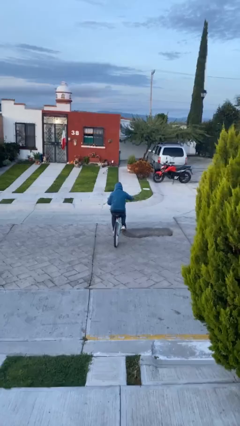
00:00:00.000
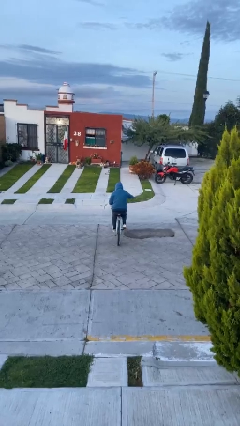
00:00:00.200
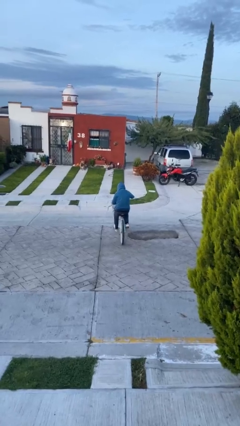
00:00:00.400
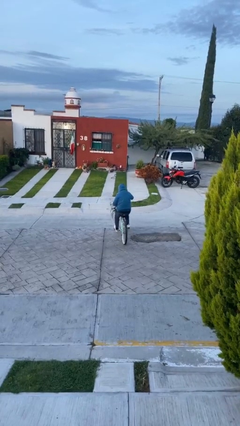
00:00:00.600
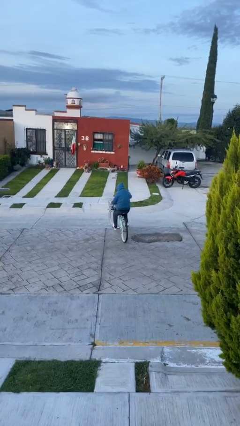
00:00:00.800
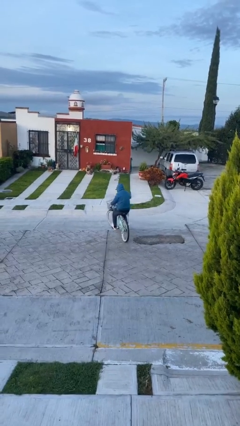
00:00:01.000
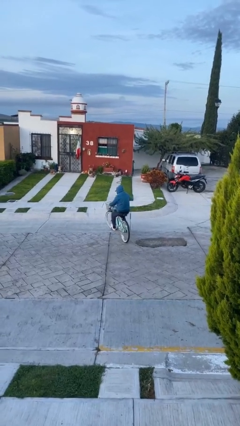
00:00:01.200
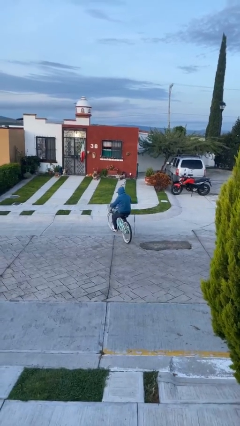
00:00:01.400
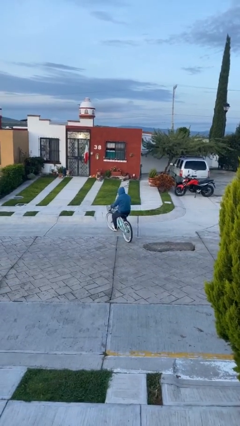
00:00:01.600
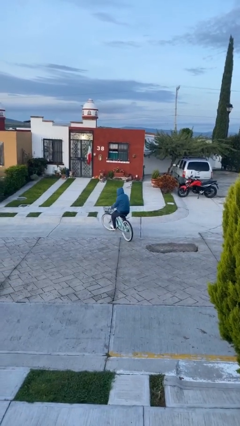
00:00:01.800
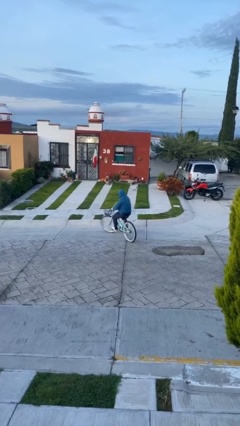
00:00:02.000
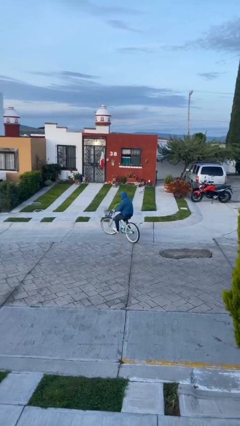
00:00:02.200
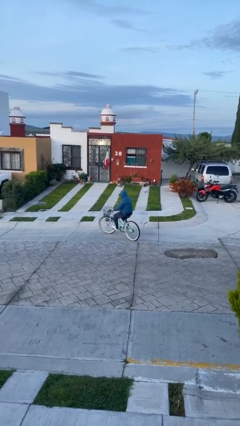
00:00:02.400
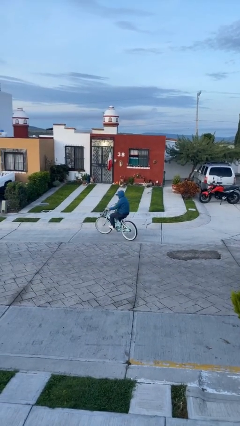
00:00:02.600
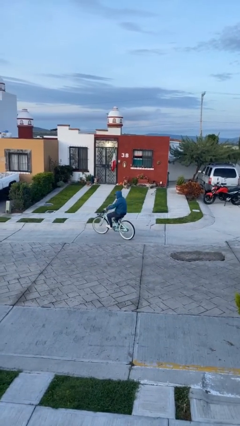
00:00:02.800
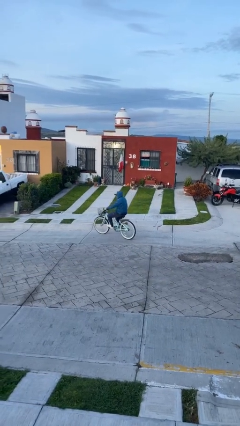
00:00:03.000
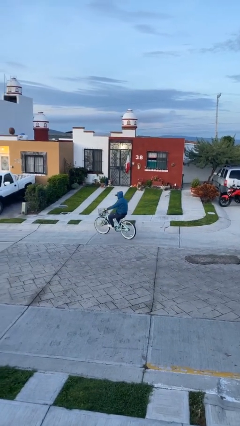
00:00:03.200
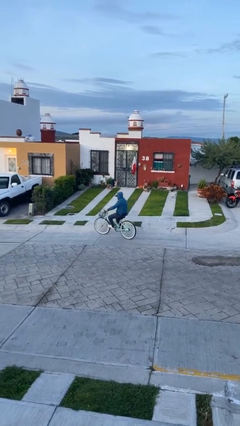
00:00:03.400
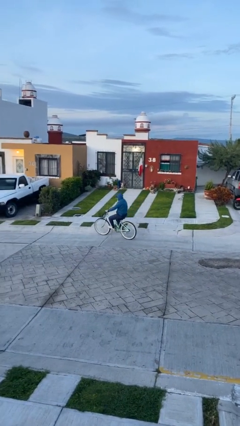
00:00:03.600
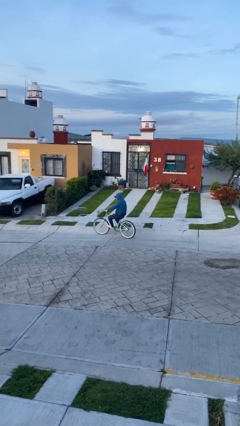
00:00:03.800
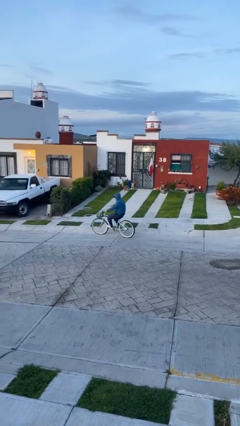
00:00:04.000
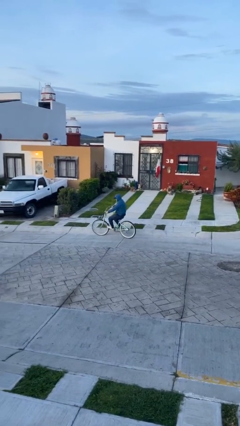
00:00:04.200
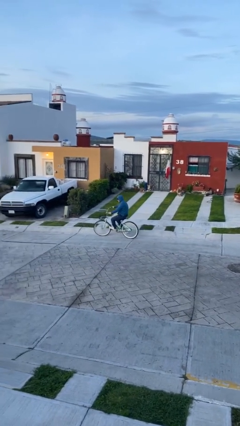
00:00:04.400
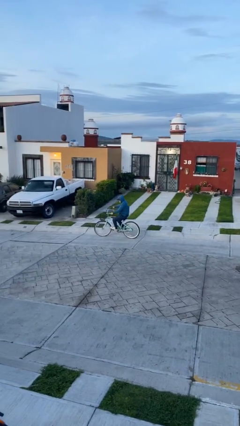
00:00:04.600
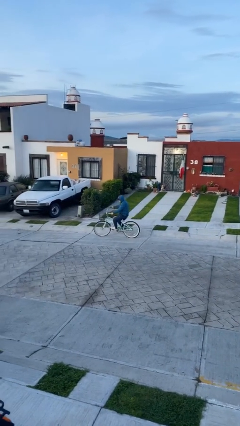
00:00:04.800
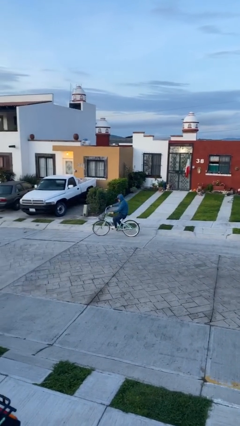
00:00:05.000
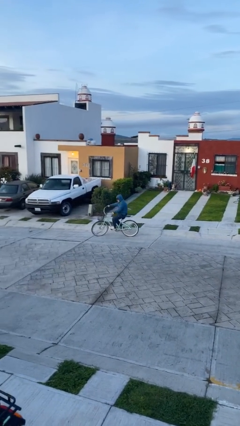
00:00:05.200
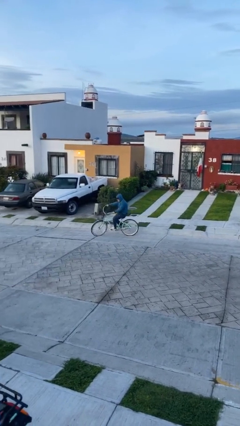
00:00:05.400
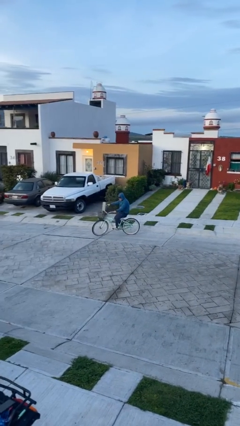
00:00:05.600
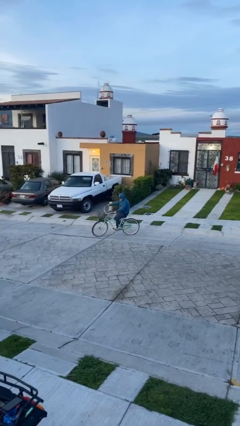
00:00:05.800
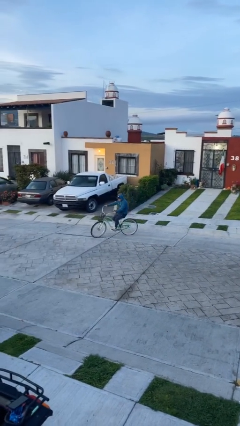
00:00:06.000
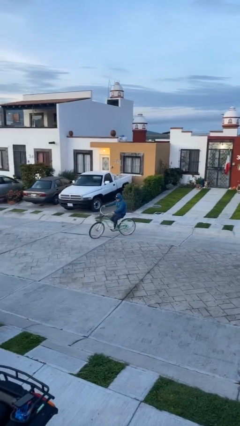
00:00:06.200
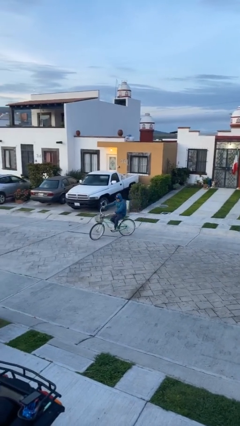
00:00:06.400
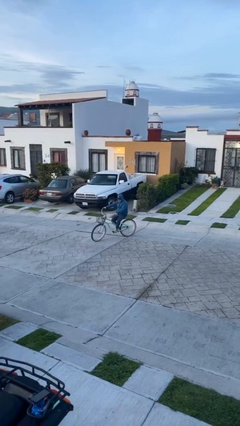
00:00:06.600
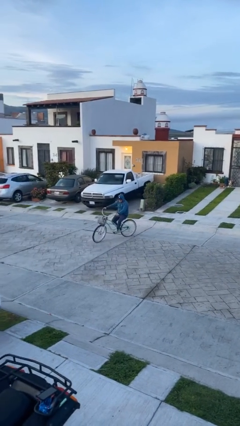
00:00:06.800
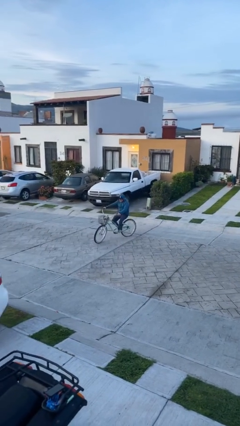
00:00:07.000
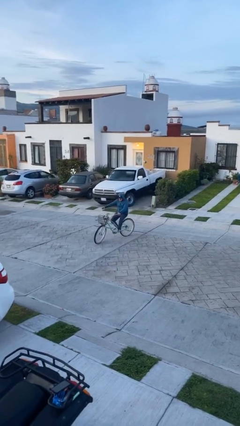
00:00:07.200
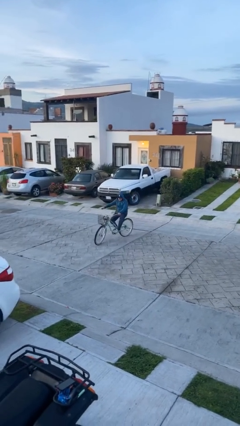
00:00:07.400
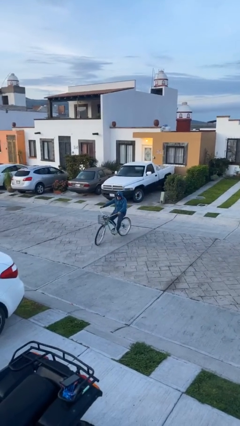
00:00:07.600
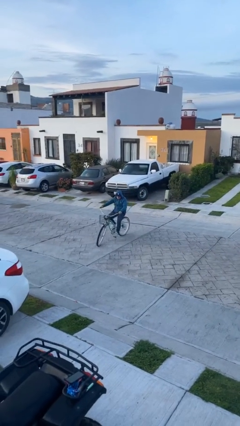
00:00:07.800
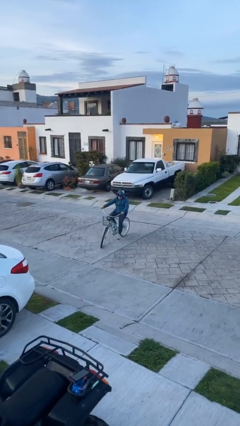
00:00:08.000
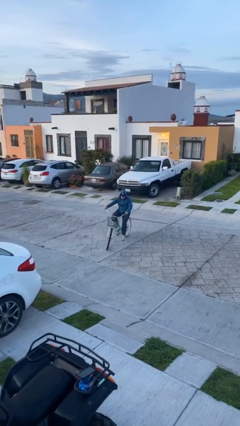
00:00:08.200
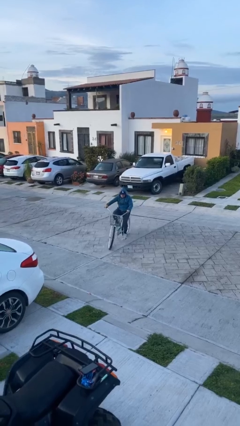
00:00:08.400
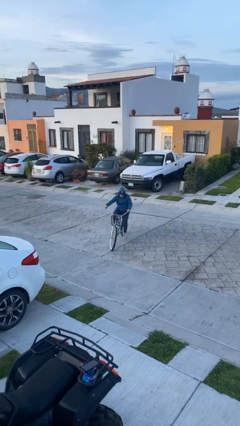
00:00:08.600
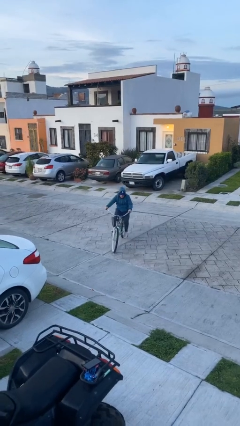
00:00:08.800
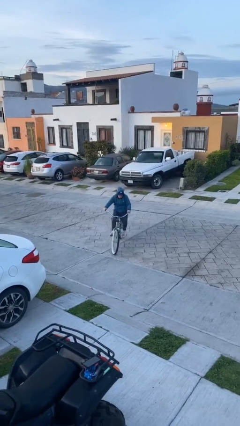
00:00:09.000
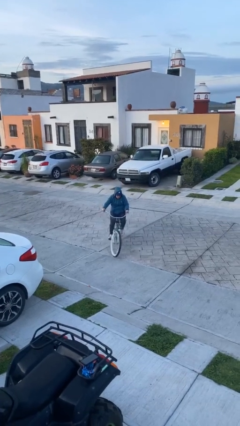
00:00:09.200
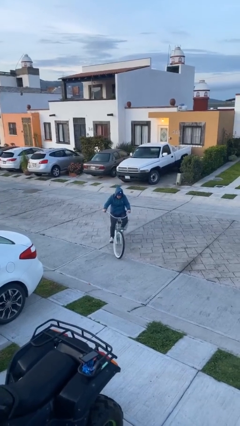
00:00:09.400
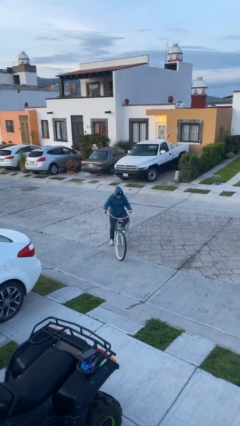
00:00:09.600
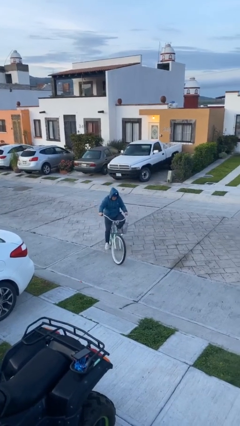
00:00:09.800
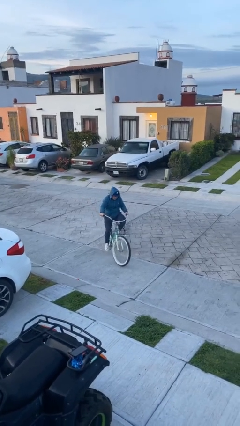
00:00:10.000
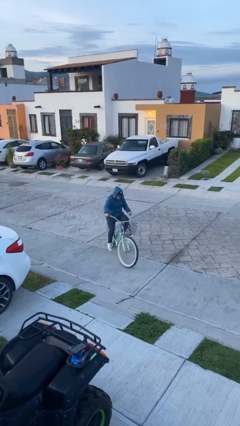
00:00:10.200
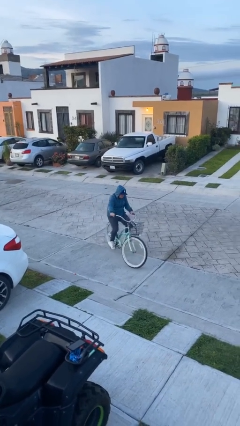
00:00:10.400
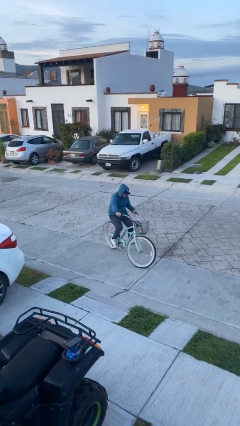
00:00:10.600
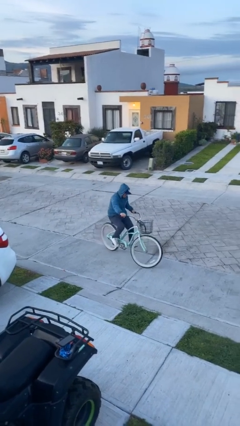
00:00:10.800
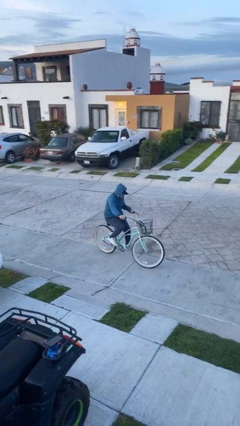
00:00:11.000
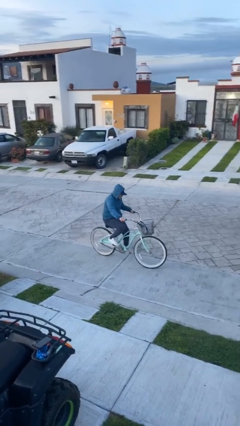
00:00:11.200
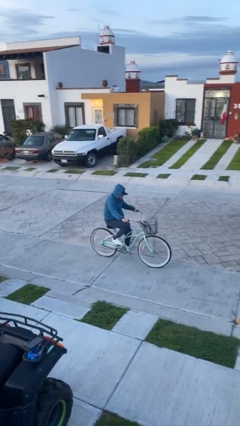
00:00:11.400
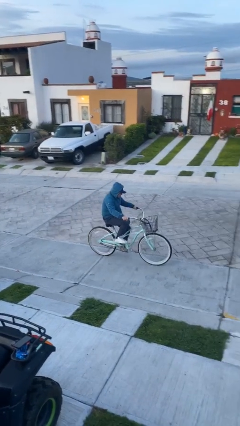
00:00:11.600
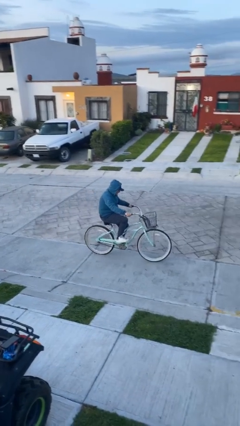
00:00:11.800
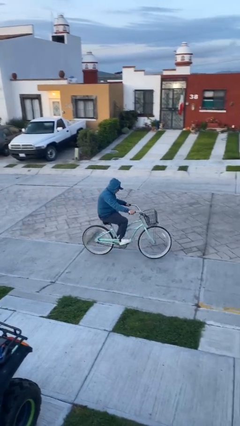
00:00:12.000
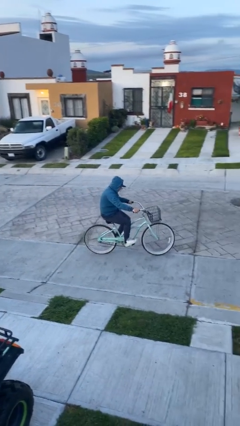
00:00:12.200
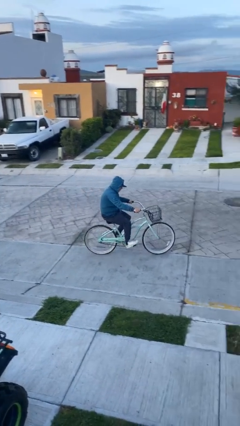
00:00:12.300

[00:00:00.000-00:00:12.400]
person rides bicycle

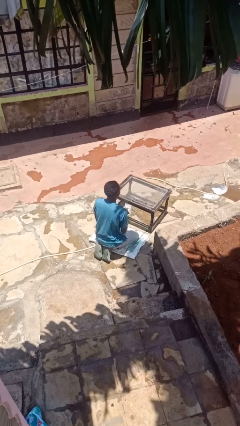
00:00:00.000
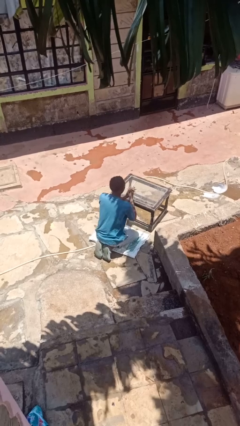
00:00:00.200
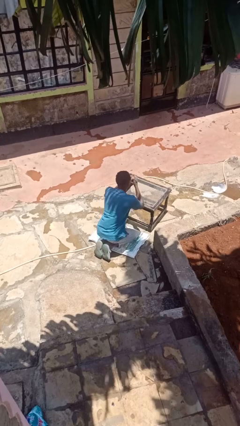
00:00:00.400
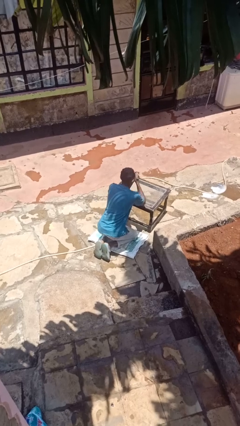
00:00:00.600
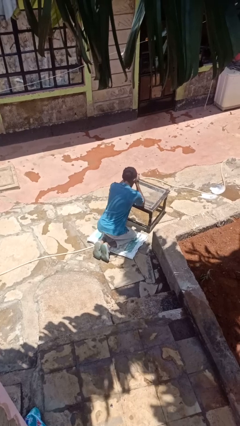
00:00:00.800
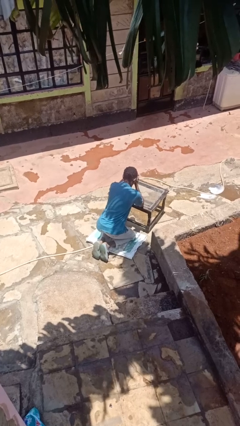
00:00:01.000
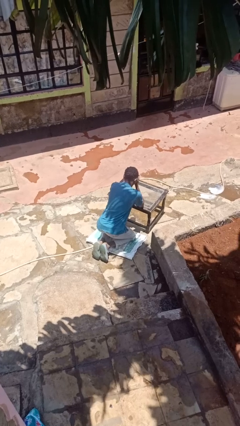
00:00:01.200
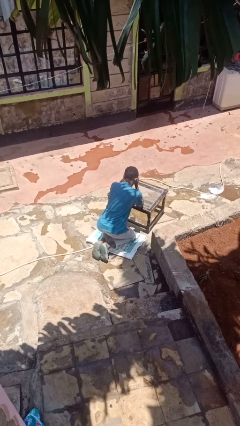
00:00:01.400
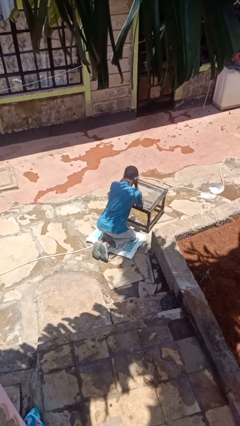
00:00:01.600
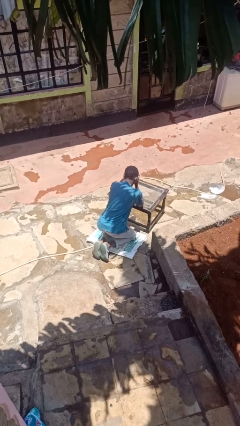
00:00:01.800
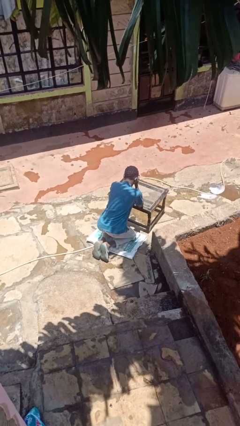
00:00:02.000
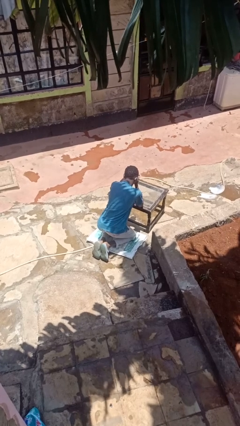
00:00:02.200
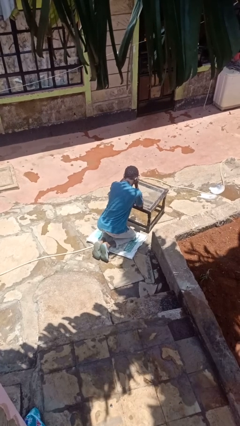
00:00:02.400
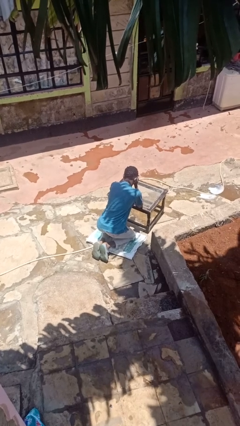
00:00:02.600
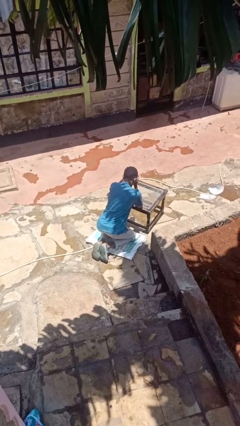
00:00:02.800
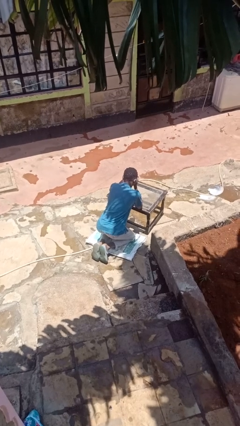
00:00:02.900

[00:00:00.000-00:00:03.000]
person prays

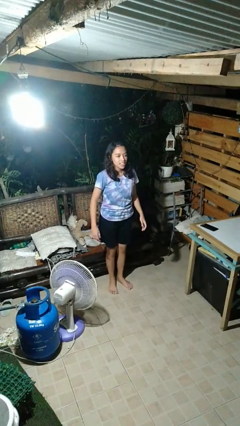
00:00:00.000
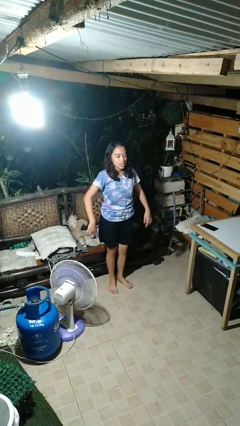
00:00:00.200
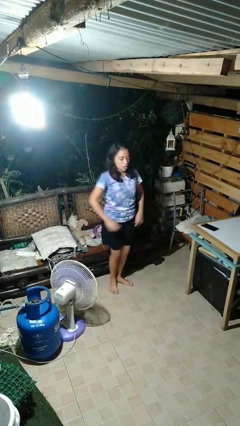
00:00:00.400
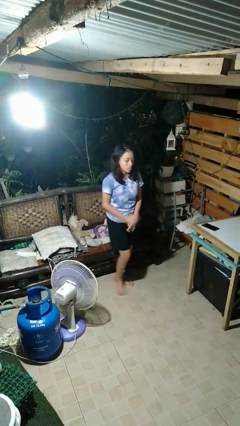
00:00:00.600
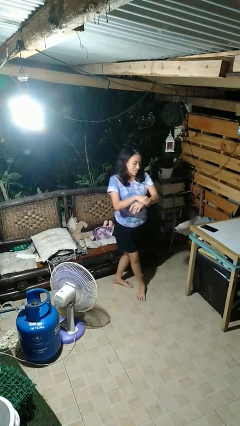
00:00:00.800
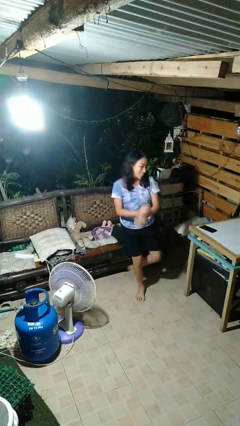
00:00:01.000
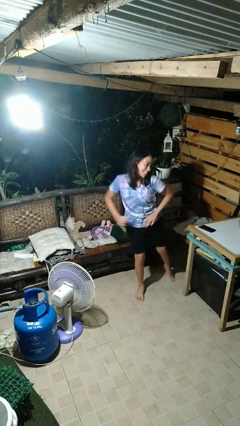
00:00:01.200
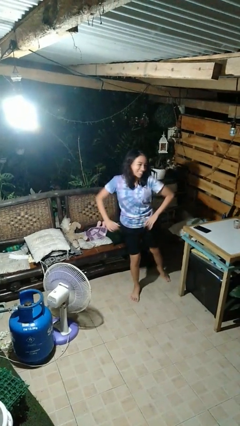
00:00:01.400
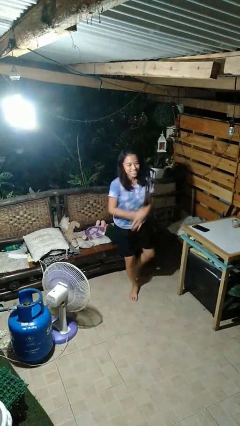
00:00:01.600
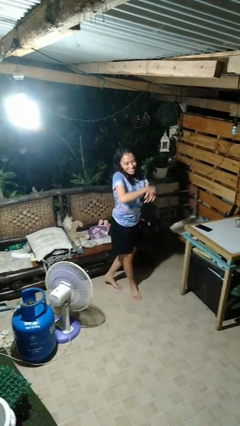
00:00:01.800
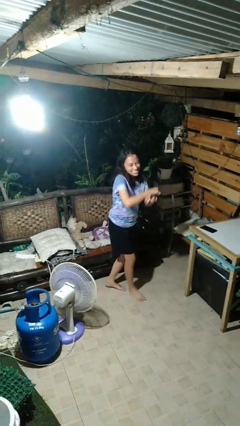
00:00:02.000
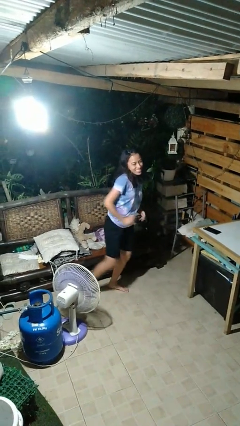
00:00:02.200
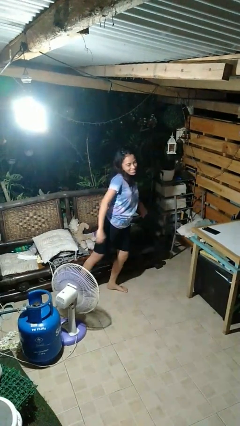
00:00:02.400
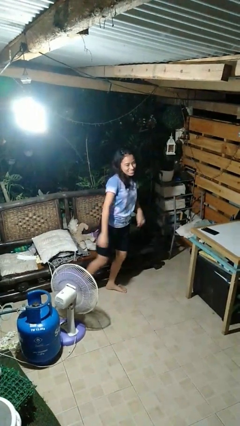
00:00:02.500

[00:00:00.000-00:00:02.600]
person dances in place

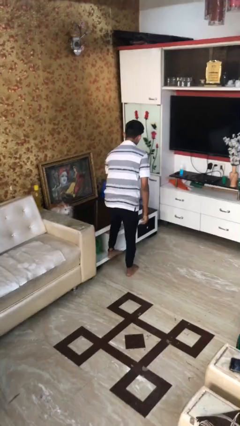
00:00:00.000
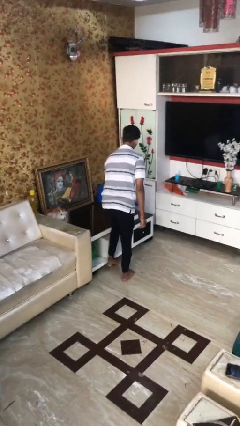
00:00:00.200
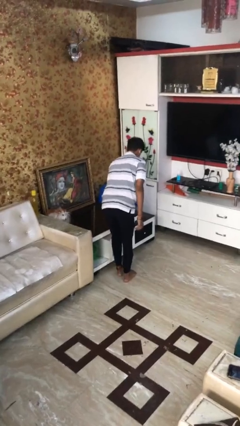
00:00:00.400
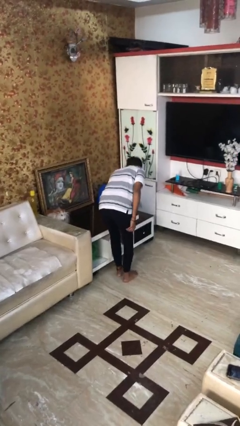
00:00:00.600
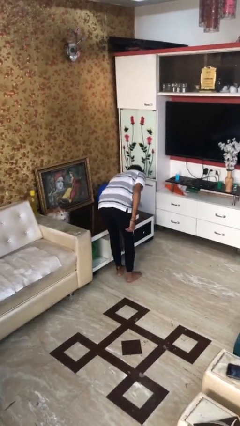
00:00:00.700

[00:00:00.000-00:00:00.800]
person bumps into table
